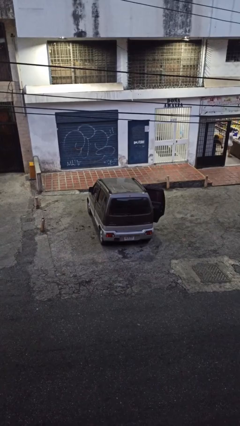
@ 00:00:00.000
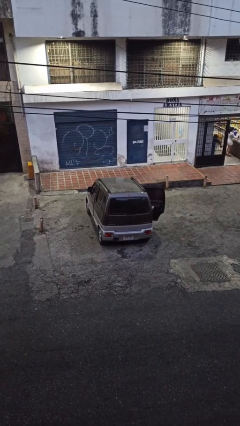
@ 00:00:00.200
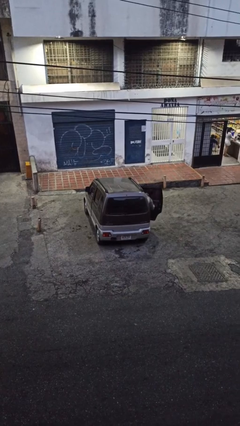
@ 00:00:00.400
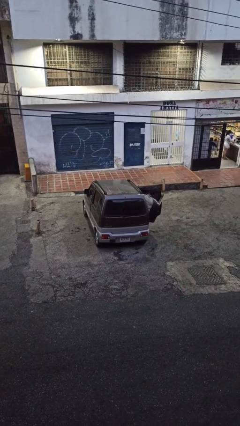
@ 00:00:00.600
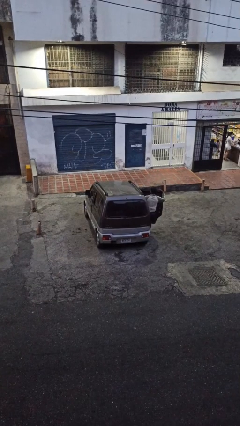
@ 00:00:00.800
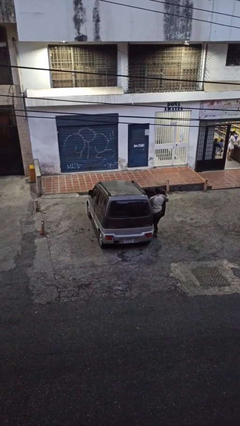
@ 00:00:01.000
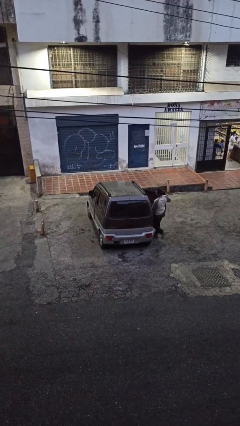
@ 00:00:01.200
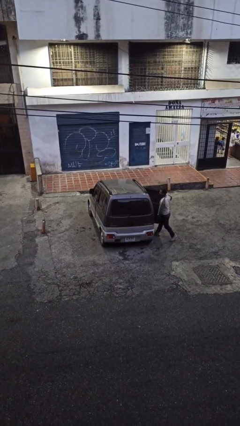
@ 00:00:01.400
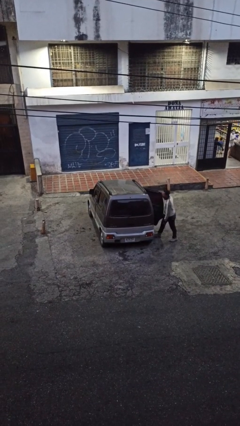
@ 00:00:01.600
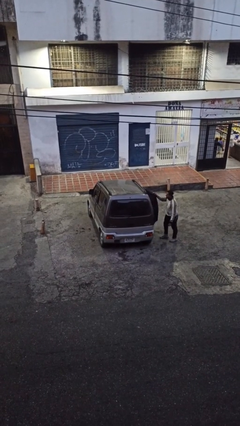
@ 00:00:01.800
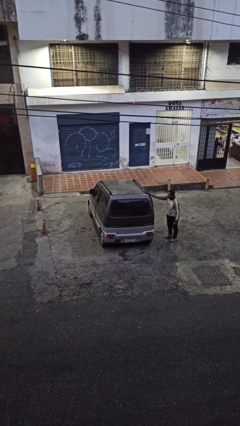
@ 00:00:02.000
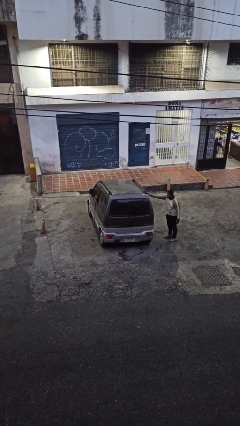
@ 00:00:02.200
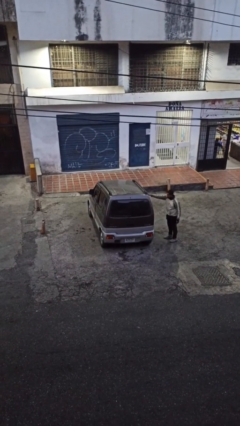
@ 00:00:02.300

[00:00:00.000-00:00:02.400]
car drops off person

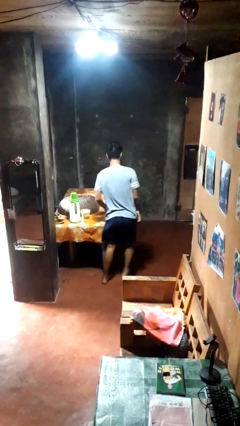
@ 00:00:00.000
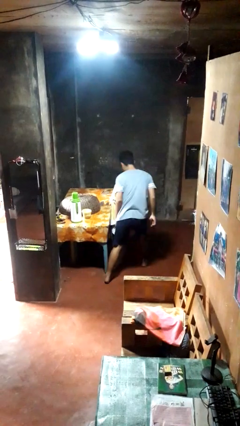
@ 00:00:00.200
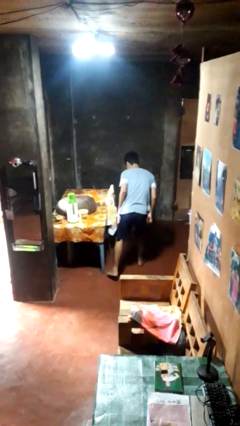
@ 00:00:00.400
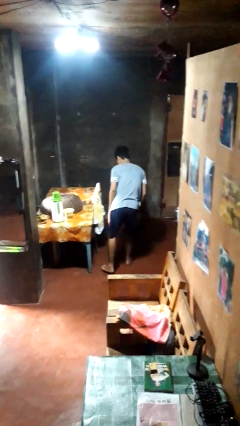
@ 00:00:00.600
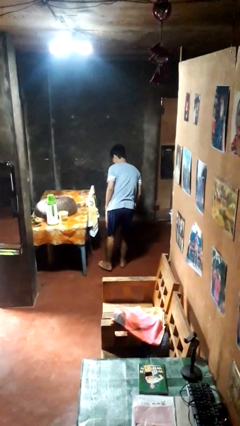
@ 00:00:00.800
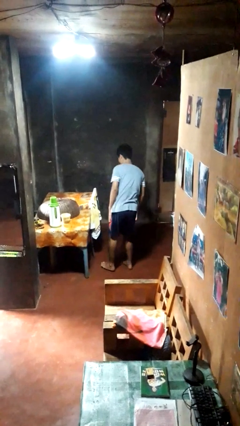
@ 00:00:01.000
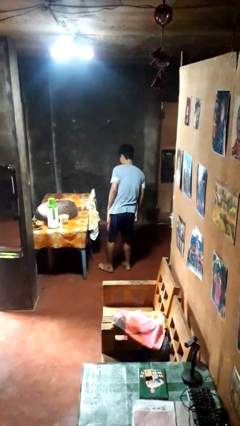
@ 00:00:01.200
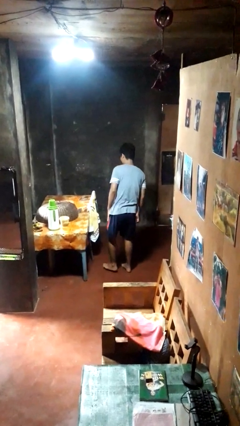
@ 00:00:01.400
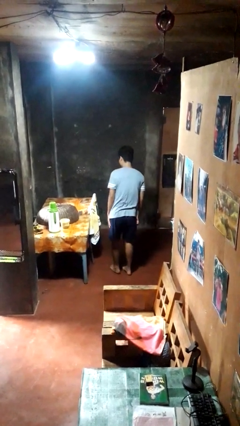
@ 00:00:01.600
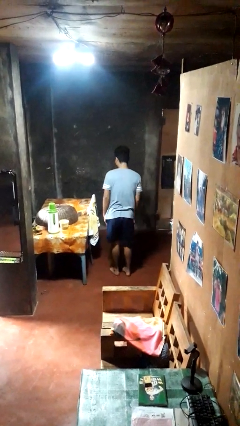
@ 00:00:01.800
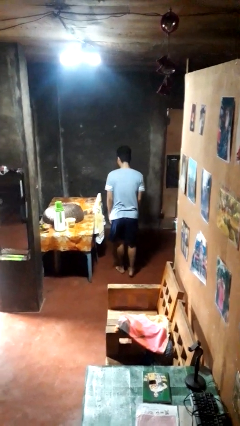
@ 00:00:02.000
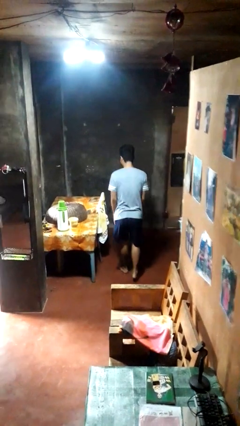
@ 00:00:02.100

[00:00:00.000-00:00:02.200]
person bumps into table

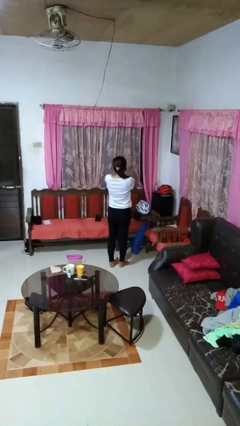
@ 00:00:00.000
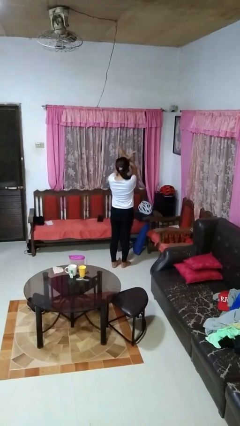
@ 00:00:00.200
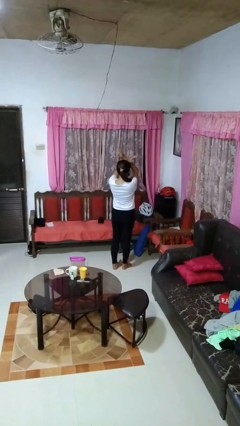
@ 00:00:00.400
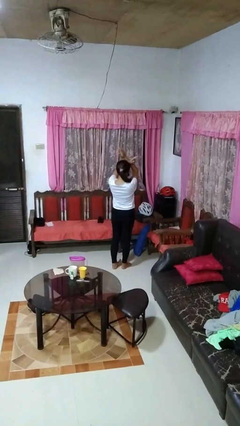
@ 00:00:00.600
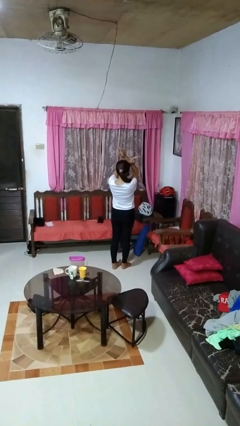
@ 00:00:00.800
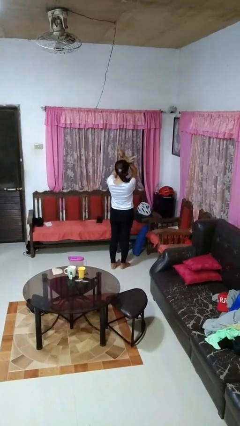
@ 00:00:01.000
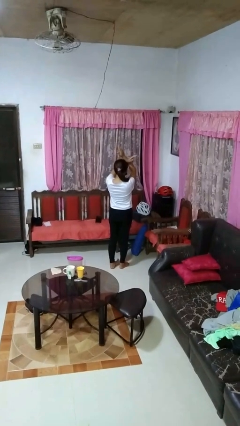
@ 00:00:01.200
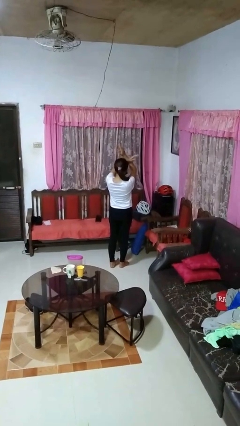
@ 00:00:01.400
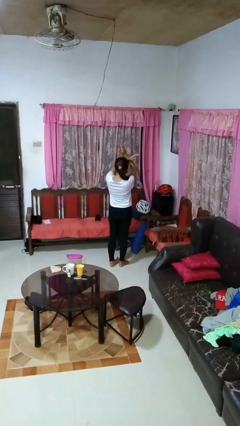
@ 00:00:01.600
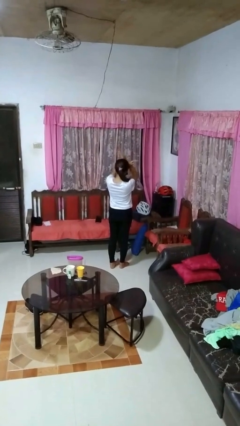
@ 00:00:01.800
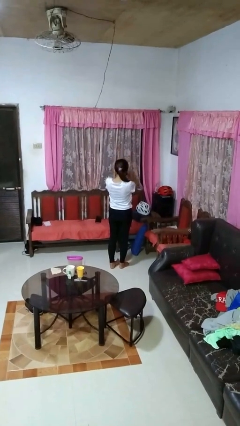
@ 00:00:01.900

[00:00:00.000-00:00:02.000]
person gestures arms x

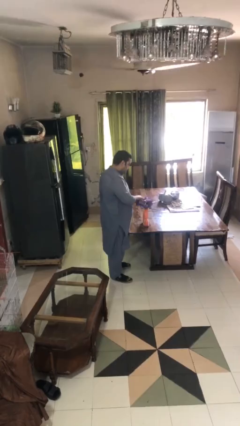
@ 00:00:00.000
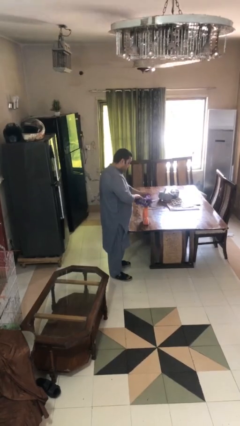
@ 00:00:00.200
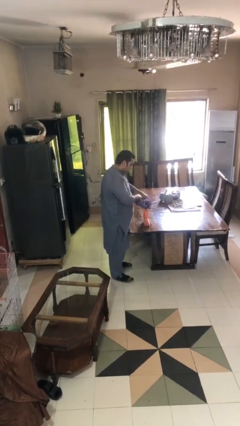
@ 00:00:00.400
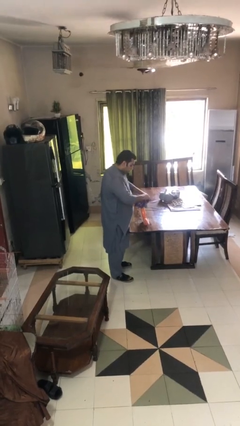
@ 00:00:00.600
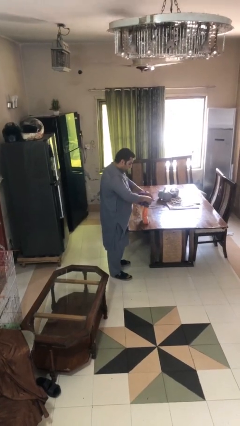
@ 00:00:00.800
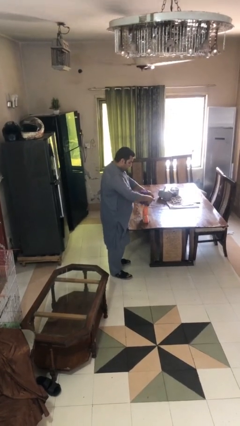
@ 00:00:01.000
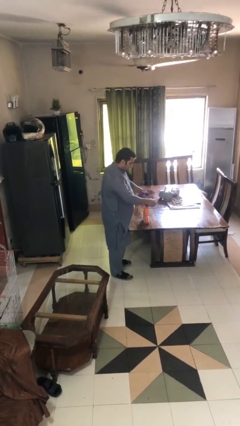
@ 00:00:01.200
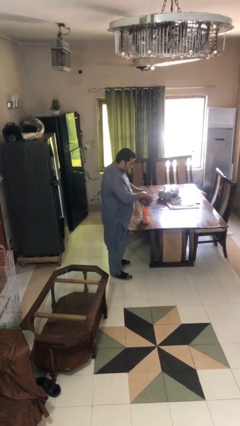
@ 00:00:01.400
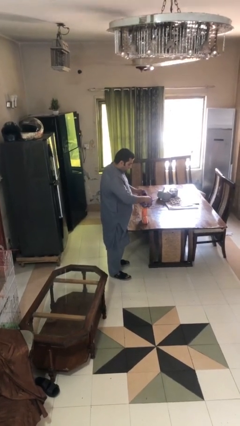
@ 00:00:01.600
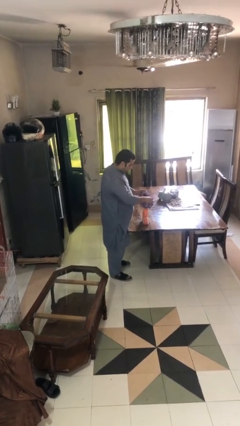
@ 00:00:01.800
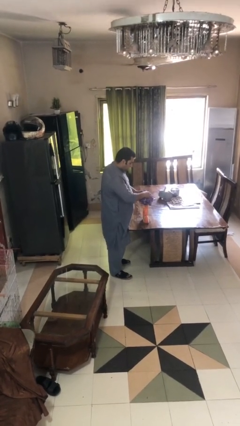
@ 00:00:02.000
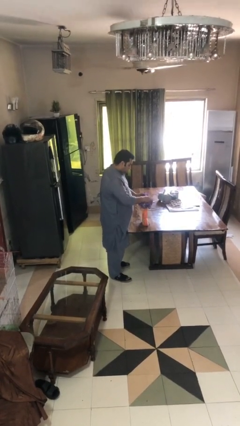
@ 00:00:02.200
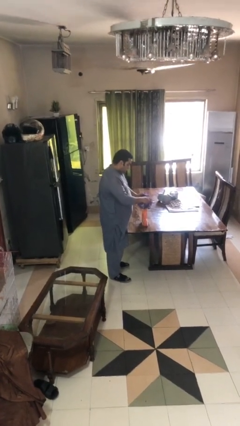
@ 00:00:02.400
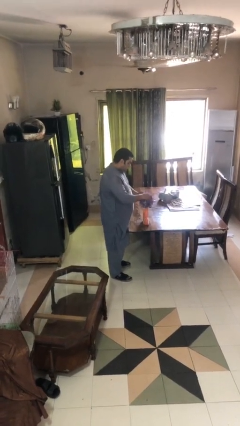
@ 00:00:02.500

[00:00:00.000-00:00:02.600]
person arranges flowers in vase

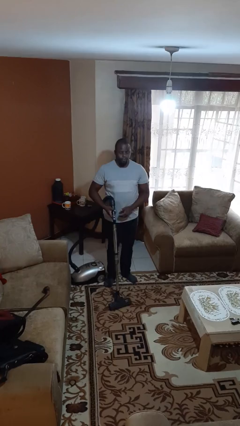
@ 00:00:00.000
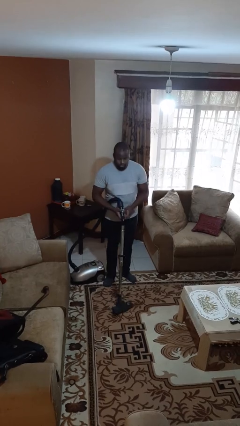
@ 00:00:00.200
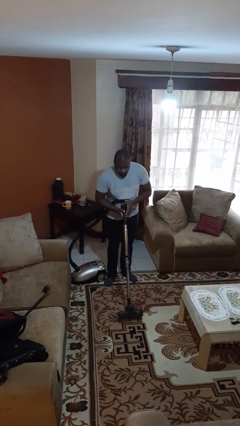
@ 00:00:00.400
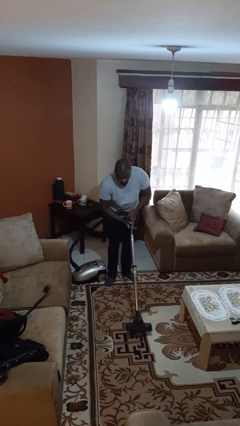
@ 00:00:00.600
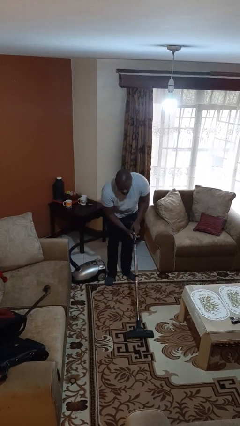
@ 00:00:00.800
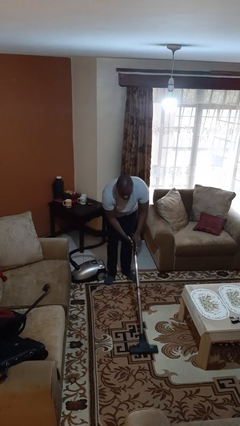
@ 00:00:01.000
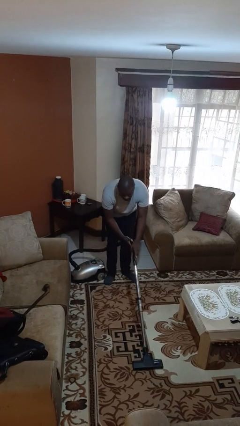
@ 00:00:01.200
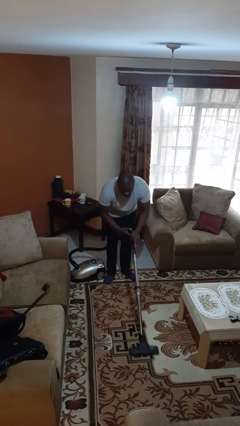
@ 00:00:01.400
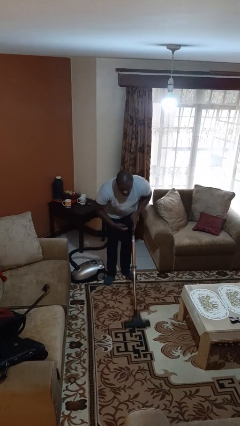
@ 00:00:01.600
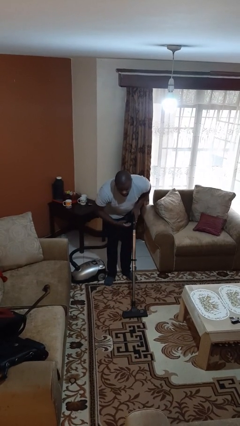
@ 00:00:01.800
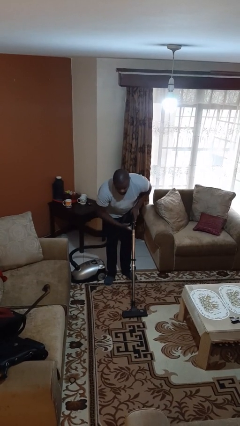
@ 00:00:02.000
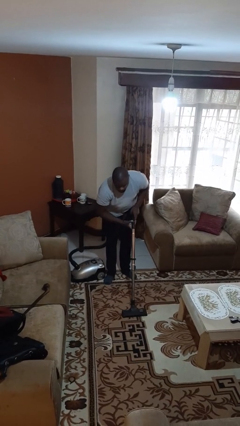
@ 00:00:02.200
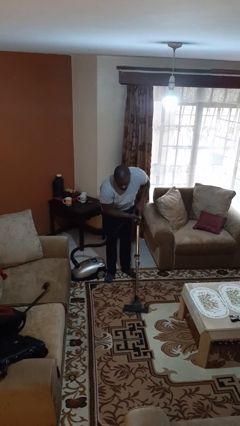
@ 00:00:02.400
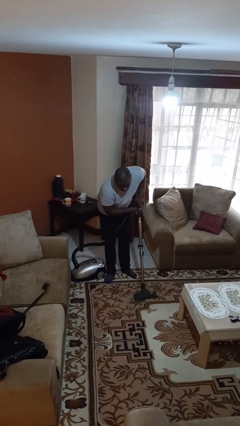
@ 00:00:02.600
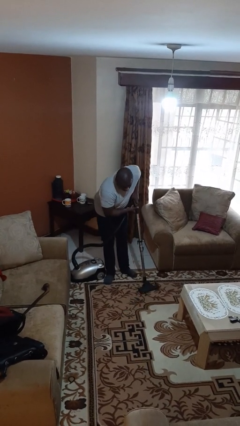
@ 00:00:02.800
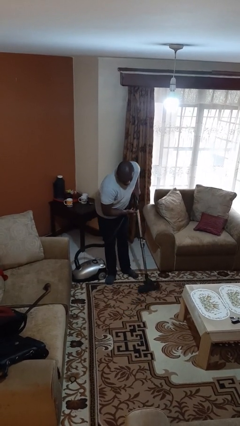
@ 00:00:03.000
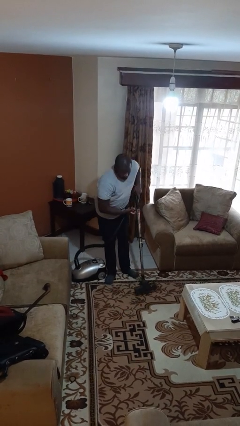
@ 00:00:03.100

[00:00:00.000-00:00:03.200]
person vacuums carpet

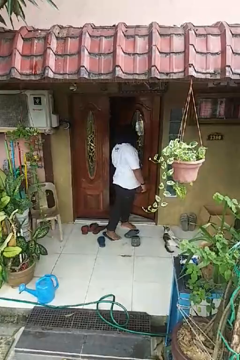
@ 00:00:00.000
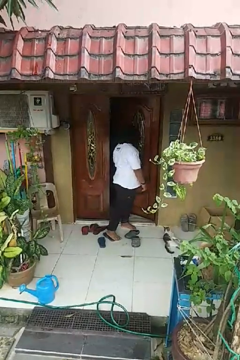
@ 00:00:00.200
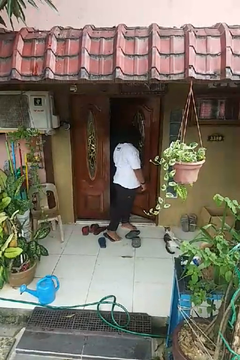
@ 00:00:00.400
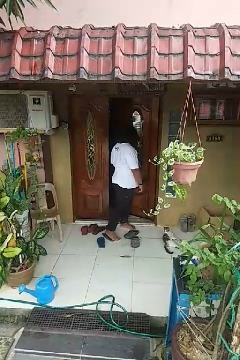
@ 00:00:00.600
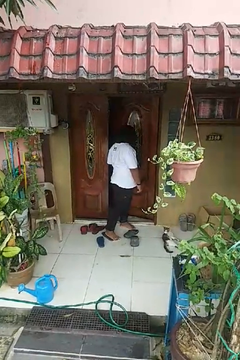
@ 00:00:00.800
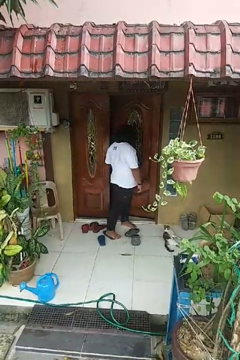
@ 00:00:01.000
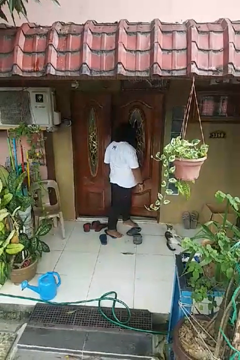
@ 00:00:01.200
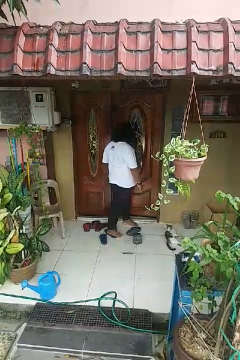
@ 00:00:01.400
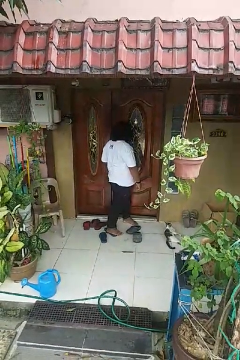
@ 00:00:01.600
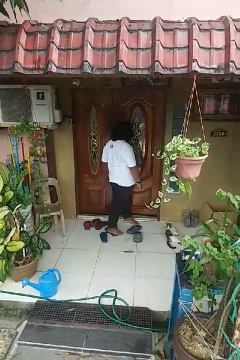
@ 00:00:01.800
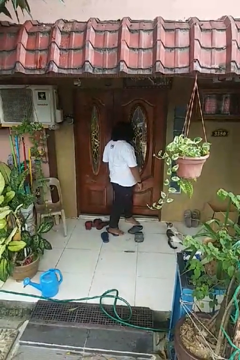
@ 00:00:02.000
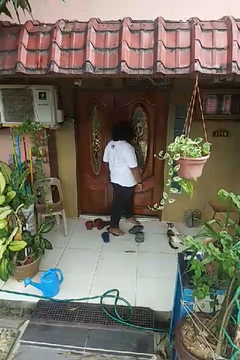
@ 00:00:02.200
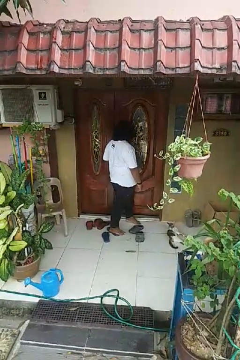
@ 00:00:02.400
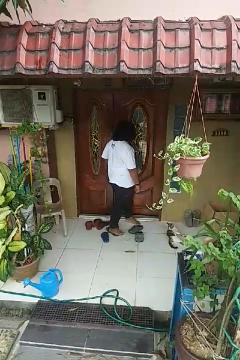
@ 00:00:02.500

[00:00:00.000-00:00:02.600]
person closes door with hip

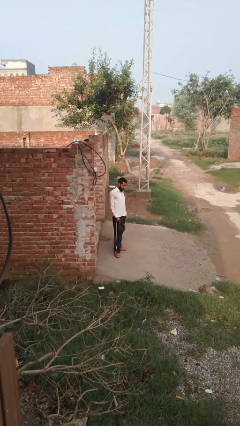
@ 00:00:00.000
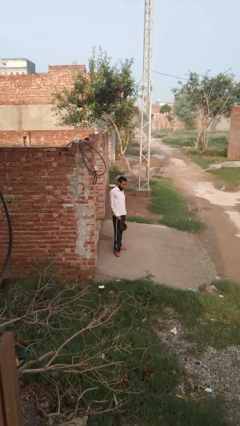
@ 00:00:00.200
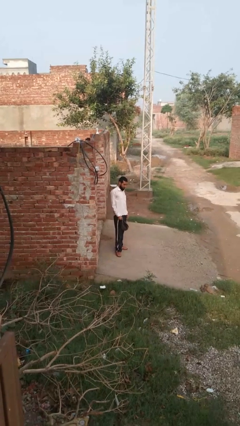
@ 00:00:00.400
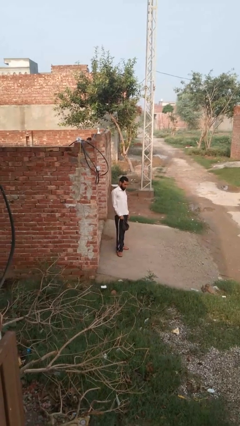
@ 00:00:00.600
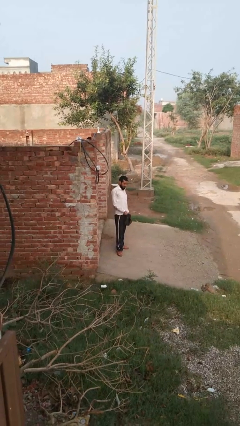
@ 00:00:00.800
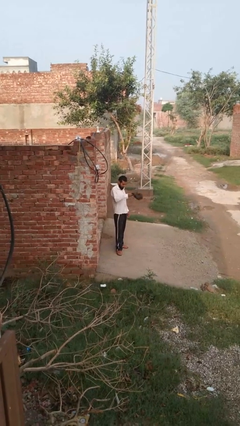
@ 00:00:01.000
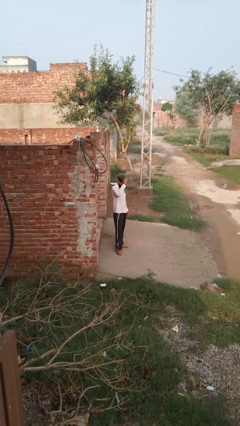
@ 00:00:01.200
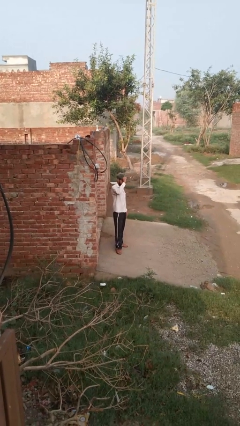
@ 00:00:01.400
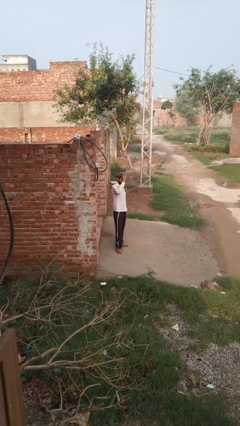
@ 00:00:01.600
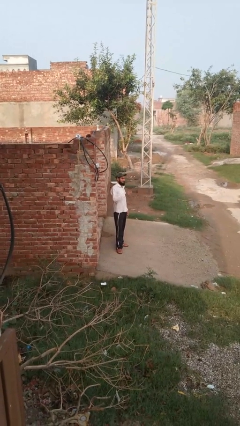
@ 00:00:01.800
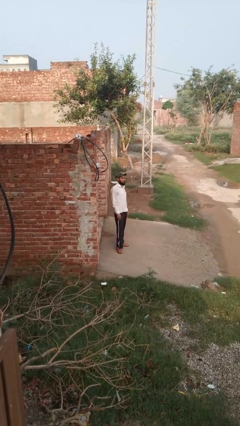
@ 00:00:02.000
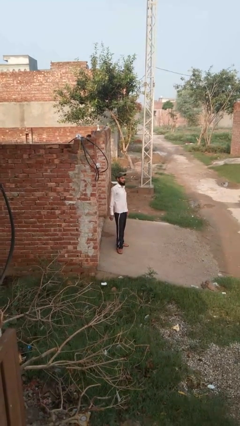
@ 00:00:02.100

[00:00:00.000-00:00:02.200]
person puts on hat

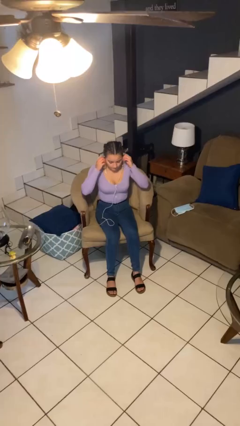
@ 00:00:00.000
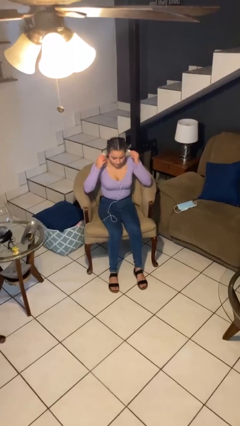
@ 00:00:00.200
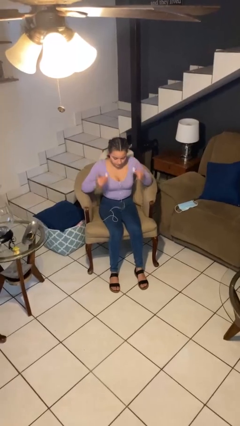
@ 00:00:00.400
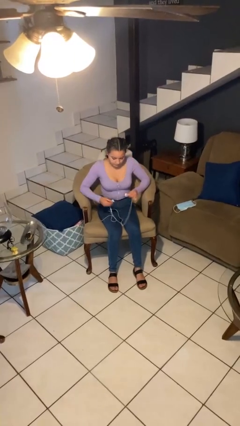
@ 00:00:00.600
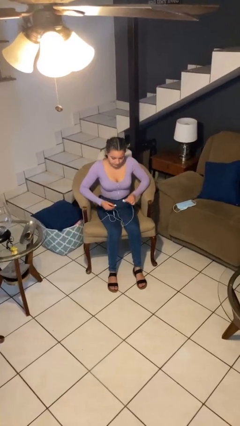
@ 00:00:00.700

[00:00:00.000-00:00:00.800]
person takes off headphones
